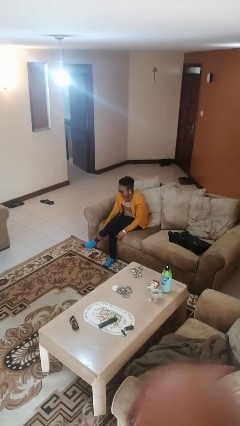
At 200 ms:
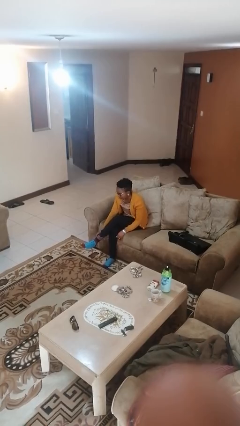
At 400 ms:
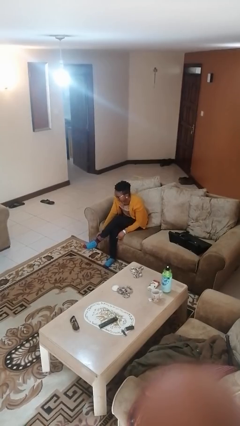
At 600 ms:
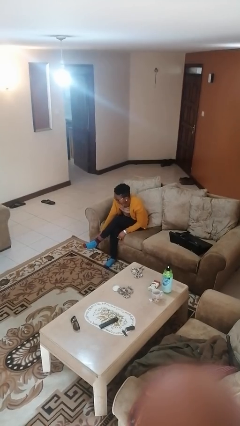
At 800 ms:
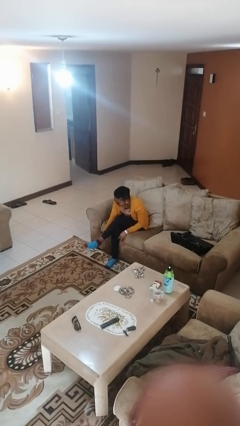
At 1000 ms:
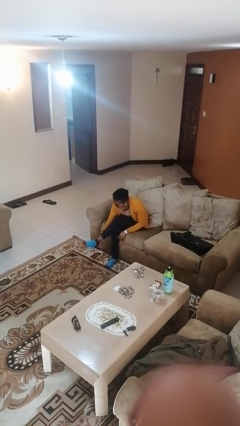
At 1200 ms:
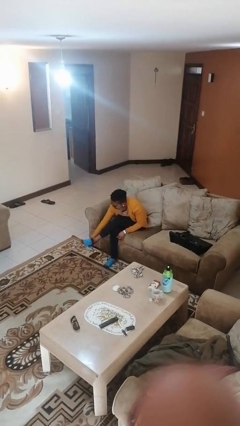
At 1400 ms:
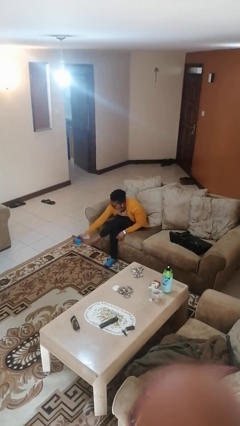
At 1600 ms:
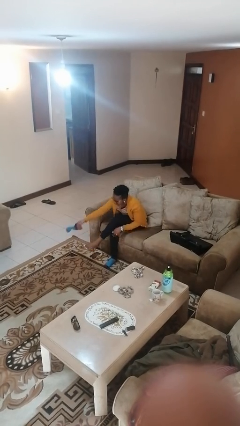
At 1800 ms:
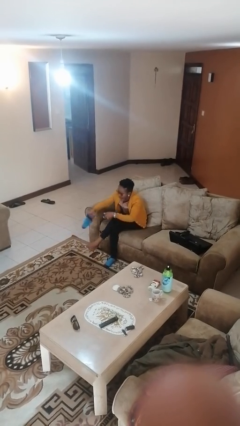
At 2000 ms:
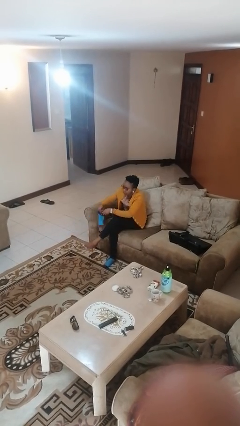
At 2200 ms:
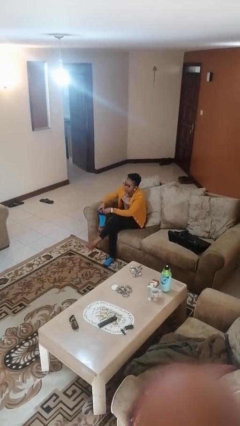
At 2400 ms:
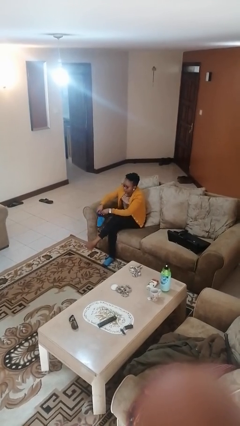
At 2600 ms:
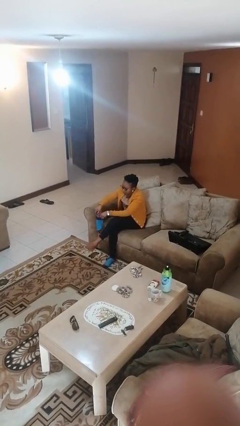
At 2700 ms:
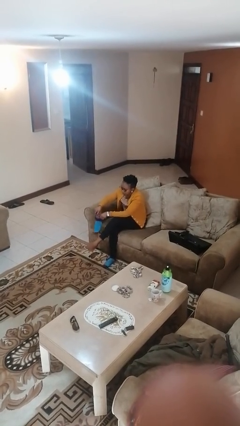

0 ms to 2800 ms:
person takes off socks

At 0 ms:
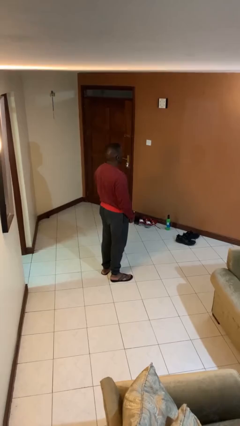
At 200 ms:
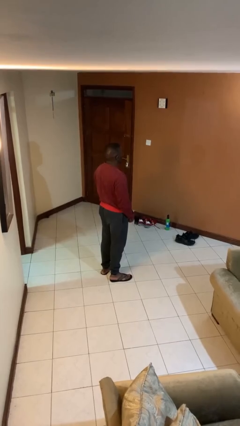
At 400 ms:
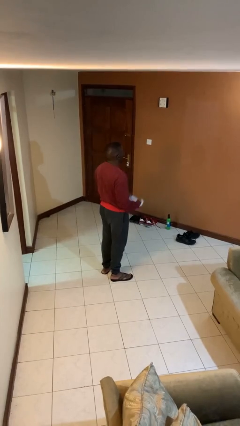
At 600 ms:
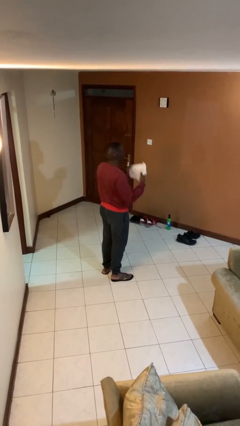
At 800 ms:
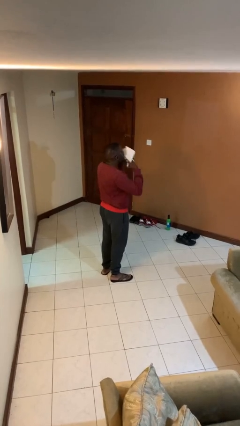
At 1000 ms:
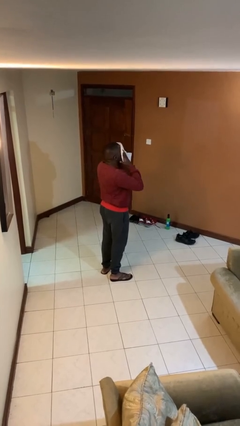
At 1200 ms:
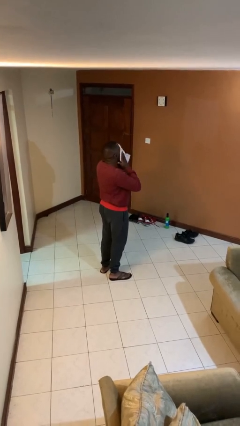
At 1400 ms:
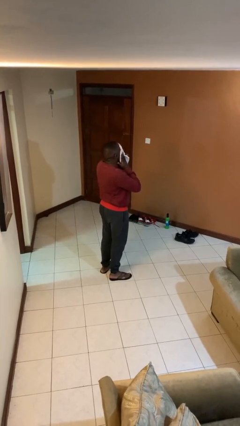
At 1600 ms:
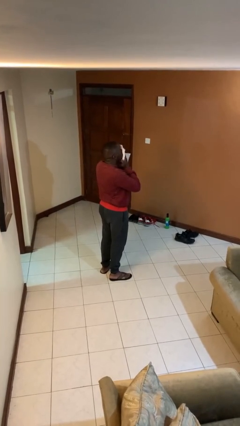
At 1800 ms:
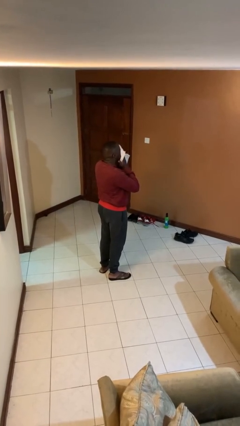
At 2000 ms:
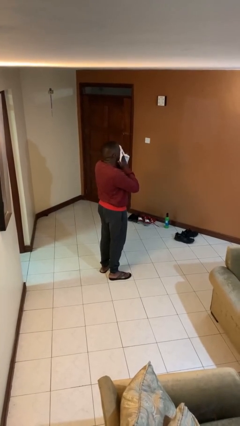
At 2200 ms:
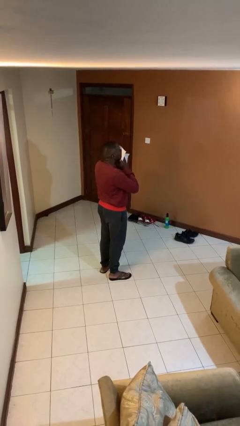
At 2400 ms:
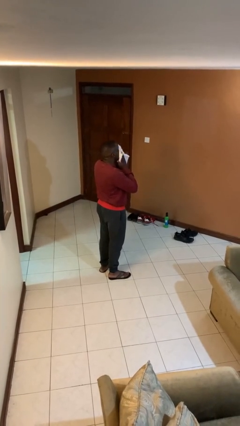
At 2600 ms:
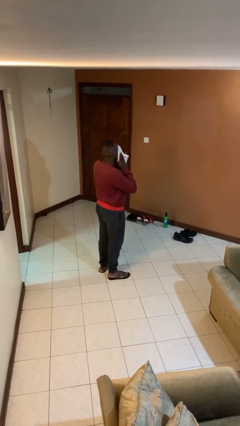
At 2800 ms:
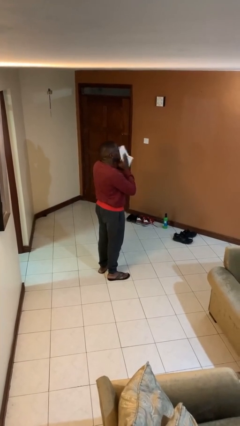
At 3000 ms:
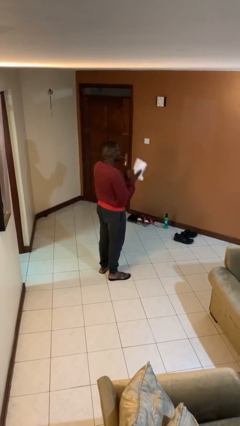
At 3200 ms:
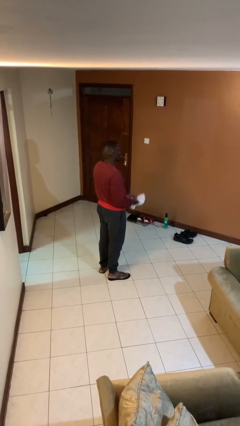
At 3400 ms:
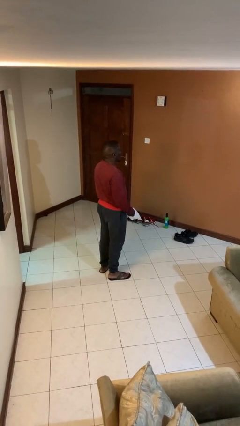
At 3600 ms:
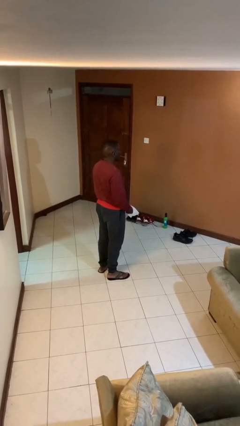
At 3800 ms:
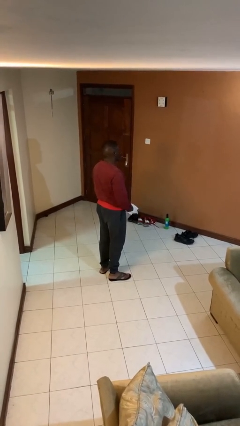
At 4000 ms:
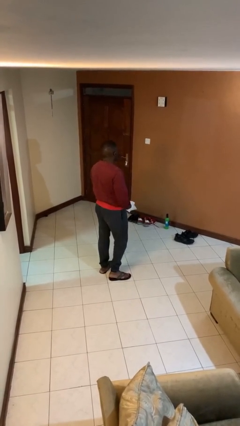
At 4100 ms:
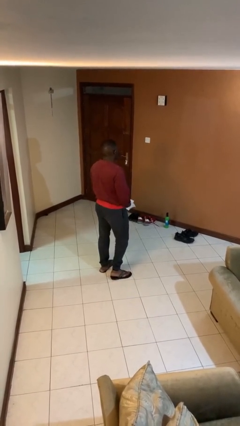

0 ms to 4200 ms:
person wipes mouth with napkin

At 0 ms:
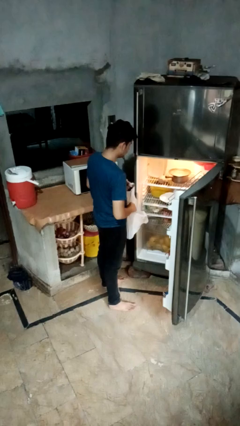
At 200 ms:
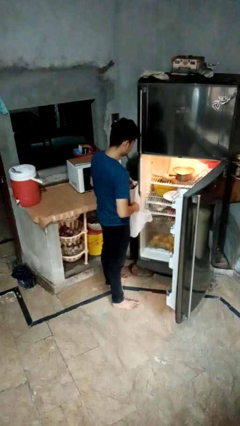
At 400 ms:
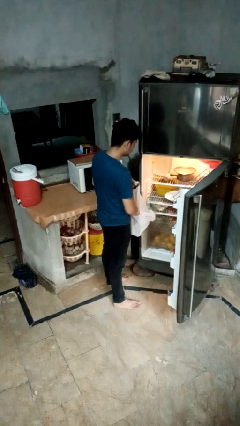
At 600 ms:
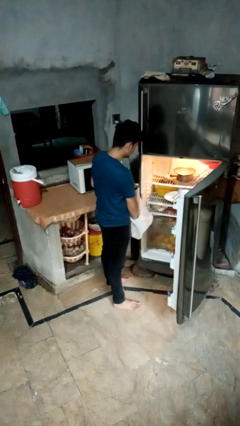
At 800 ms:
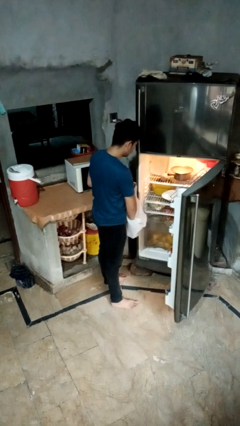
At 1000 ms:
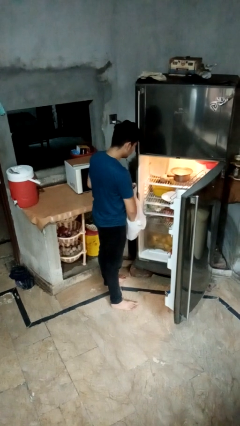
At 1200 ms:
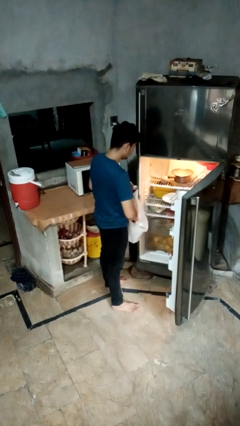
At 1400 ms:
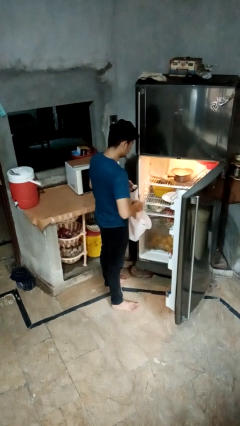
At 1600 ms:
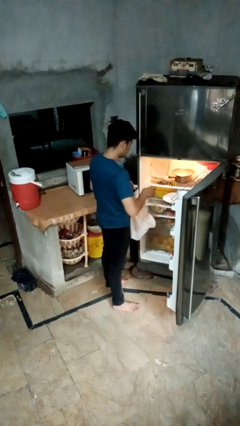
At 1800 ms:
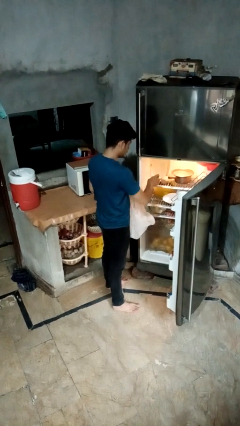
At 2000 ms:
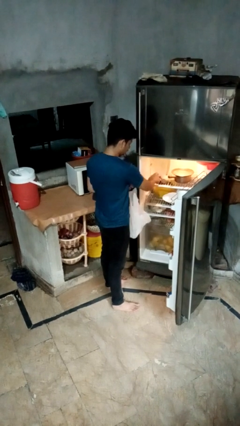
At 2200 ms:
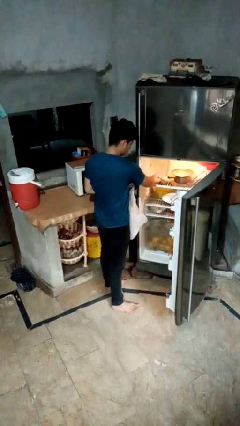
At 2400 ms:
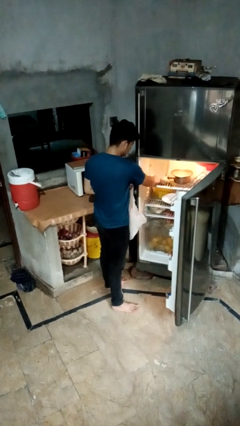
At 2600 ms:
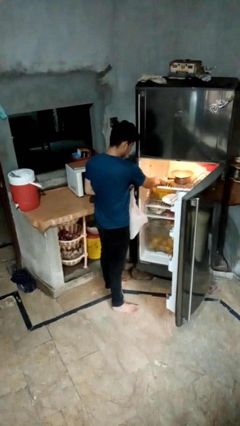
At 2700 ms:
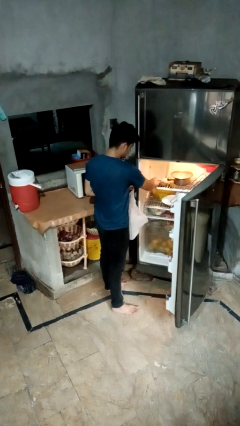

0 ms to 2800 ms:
person loads groceries into refrigerator

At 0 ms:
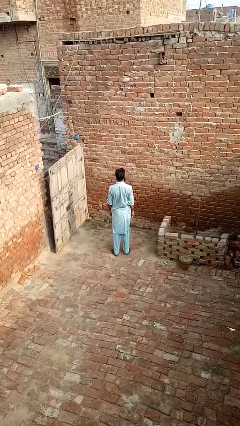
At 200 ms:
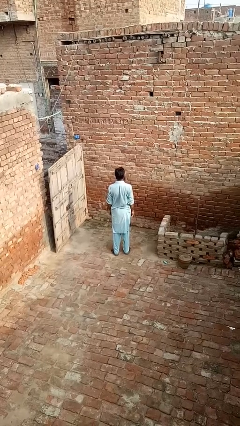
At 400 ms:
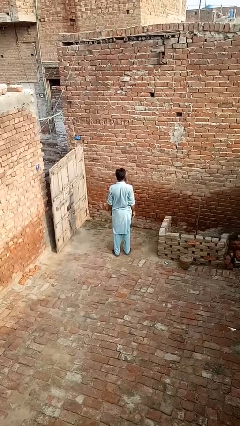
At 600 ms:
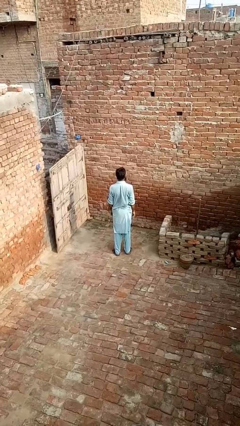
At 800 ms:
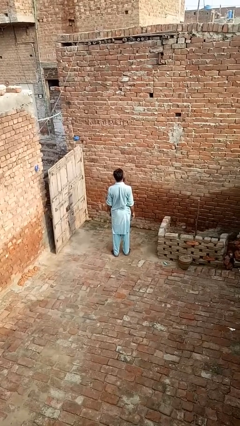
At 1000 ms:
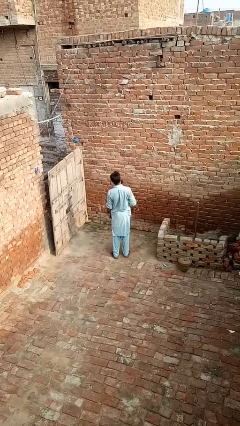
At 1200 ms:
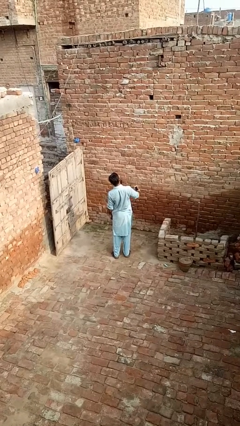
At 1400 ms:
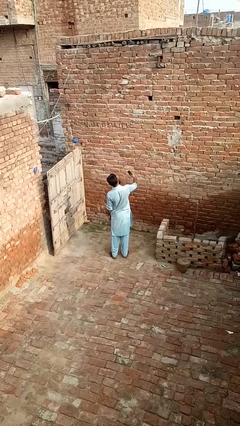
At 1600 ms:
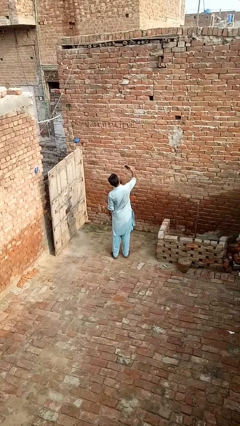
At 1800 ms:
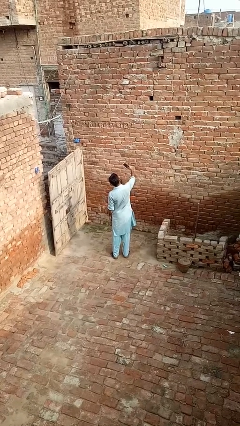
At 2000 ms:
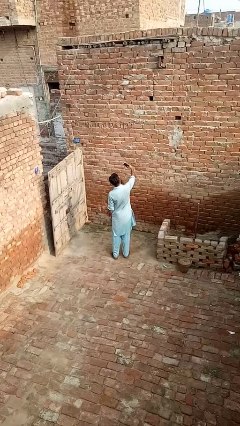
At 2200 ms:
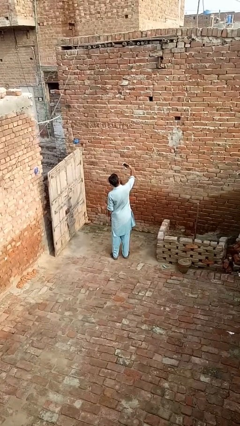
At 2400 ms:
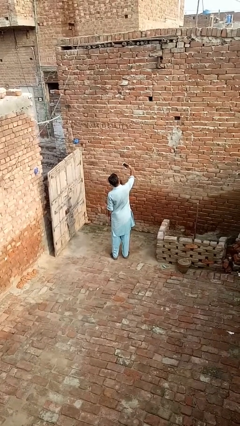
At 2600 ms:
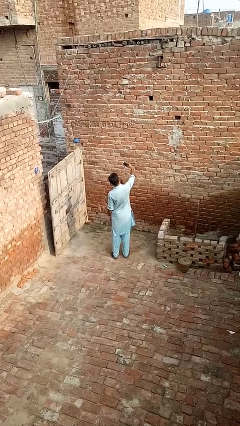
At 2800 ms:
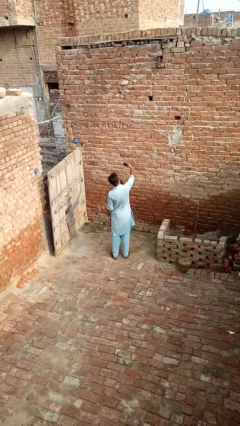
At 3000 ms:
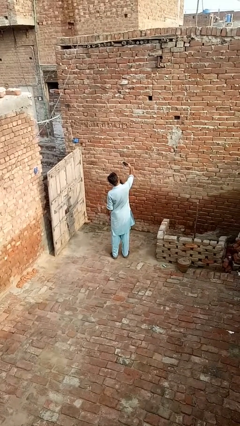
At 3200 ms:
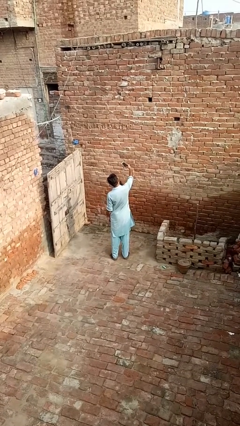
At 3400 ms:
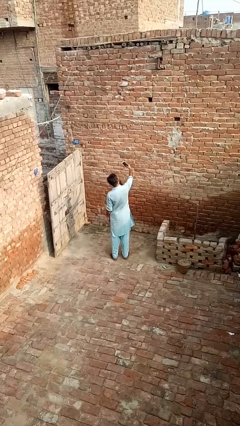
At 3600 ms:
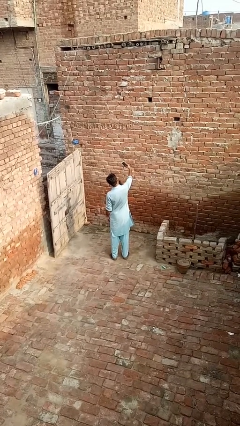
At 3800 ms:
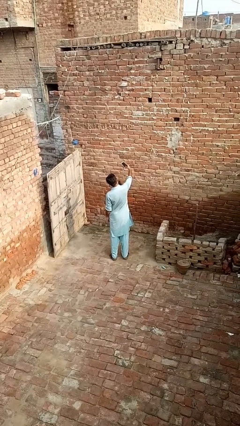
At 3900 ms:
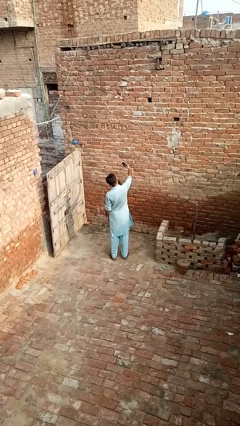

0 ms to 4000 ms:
person takes selfie

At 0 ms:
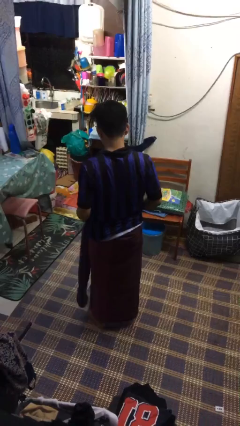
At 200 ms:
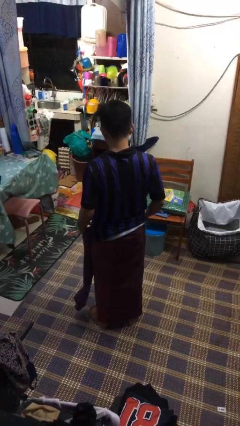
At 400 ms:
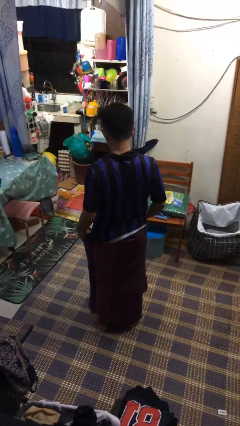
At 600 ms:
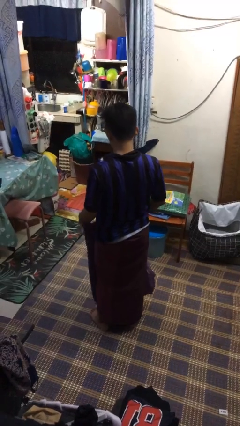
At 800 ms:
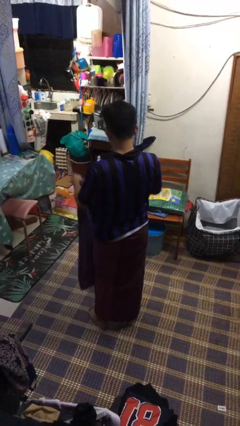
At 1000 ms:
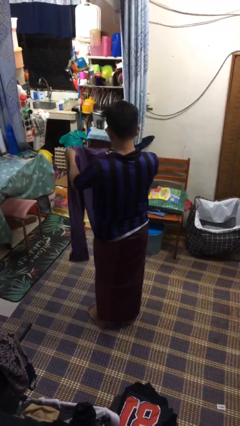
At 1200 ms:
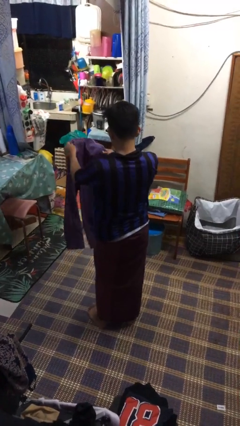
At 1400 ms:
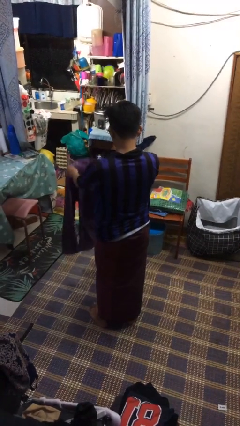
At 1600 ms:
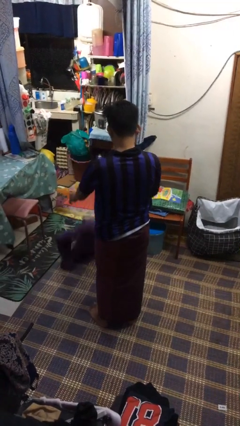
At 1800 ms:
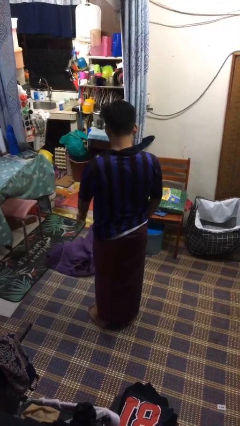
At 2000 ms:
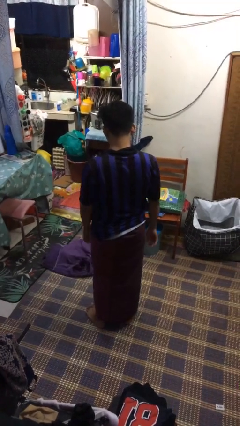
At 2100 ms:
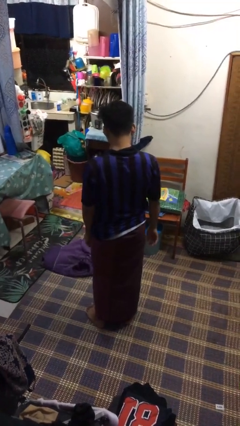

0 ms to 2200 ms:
person throws object to ground

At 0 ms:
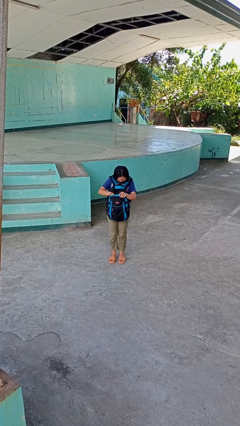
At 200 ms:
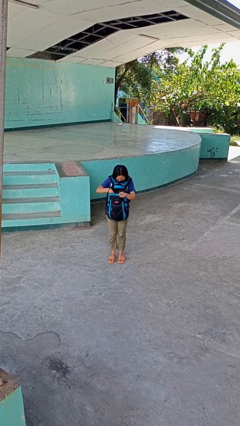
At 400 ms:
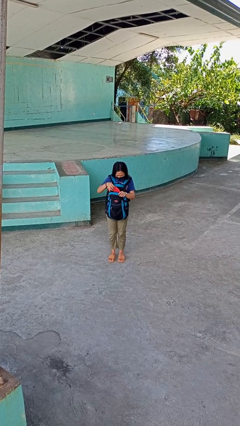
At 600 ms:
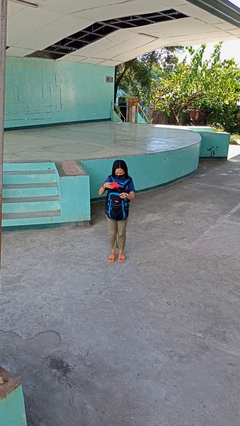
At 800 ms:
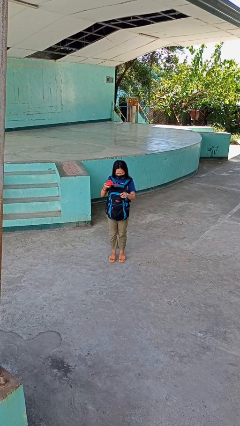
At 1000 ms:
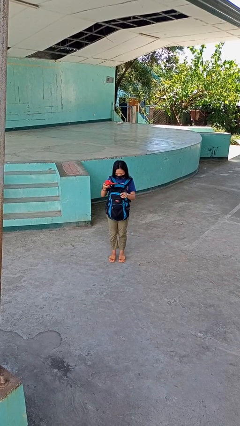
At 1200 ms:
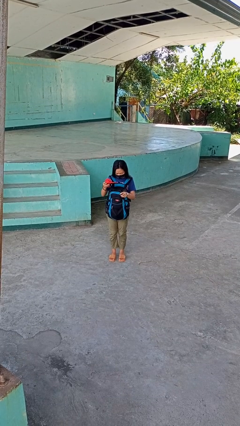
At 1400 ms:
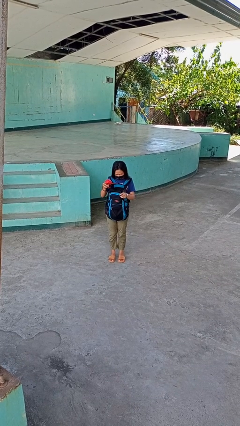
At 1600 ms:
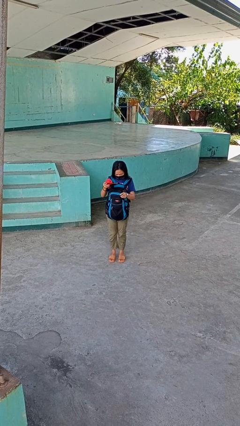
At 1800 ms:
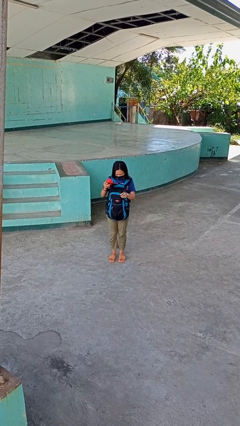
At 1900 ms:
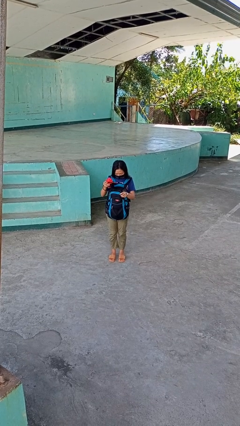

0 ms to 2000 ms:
person takes object from backpack
